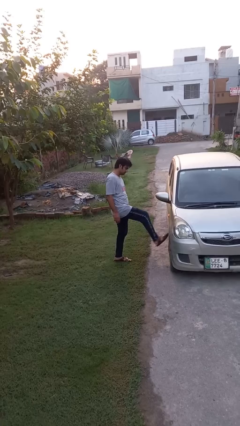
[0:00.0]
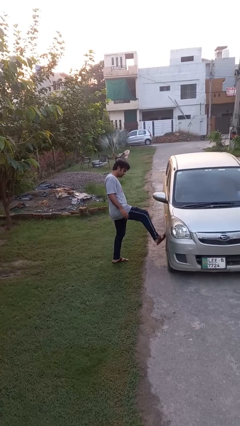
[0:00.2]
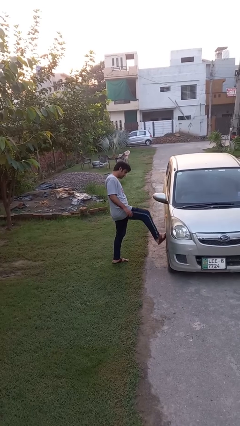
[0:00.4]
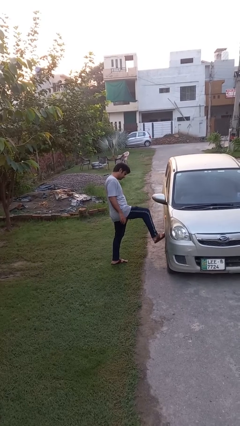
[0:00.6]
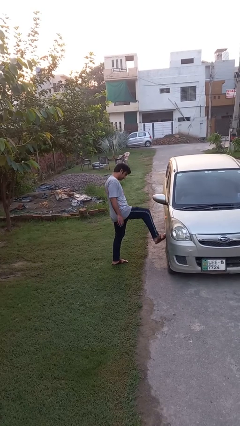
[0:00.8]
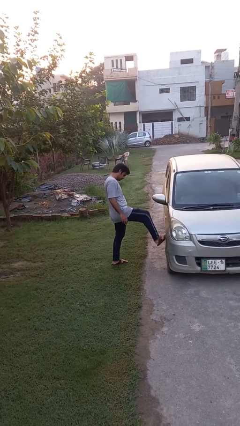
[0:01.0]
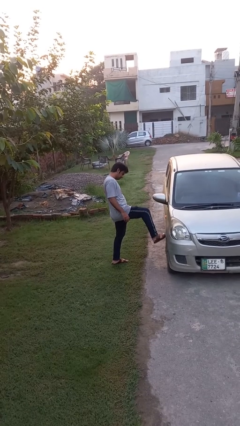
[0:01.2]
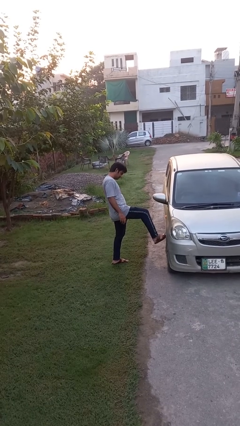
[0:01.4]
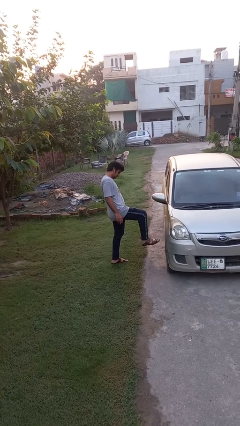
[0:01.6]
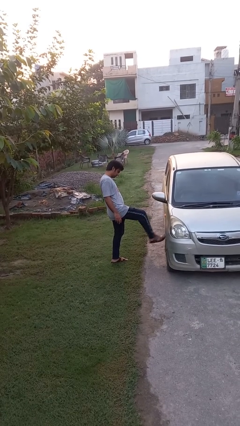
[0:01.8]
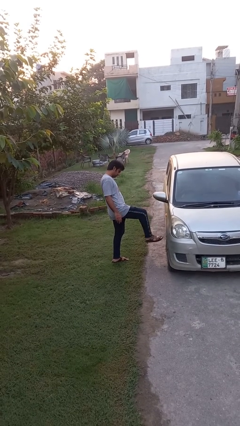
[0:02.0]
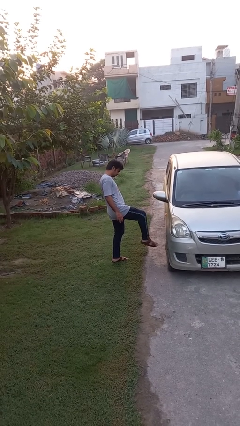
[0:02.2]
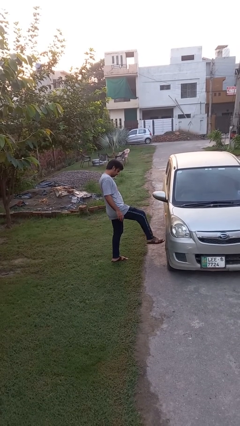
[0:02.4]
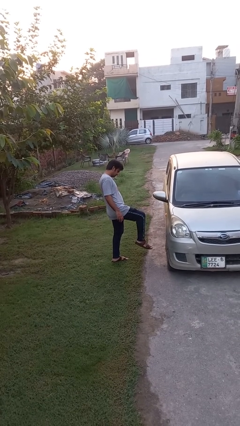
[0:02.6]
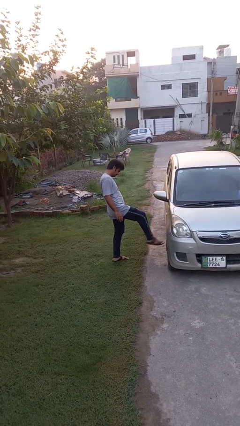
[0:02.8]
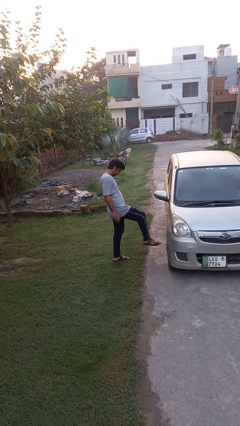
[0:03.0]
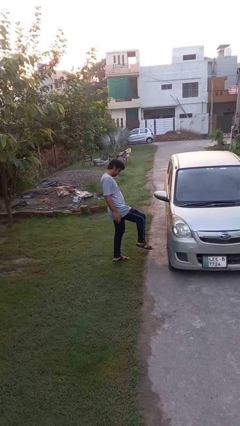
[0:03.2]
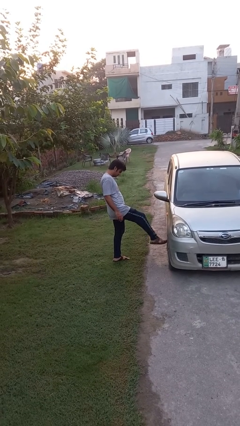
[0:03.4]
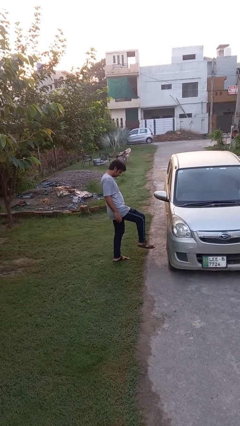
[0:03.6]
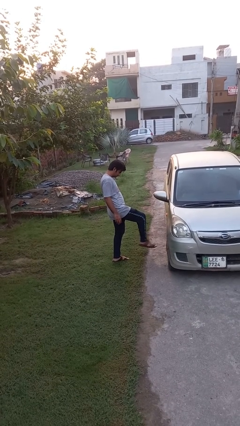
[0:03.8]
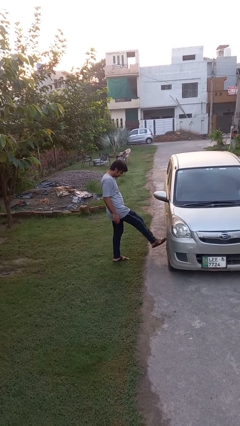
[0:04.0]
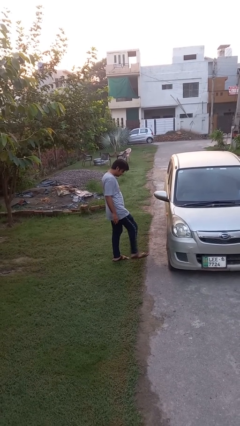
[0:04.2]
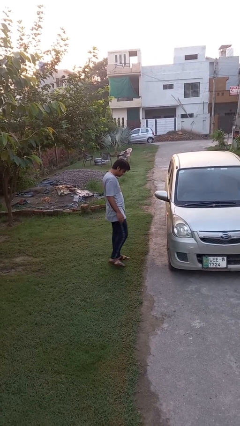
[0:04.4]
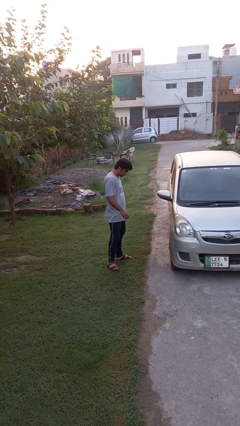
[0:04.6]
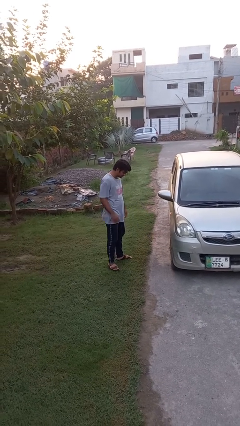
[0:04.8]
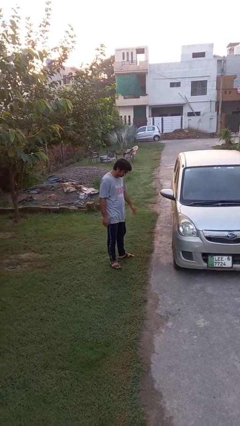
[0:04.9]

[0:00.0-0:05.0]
person kicks car tires

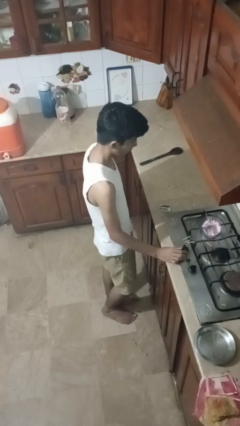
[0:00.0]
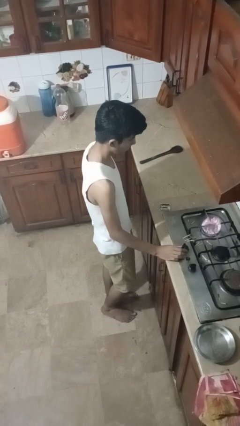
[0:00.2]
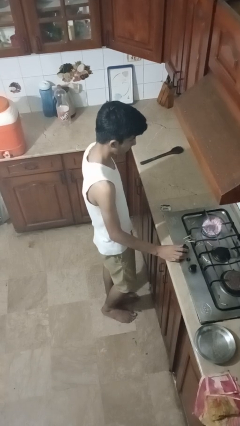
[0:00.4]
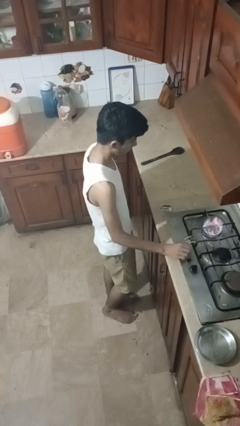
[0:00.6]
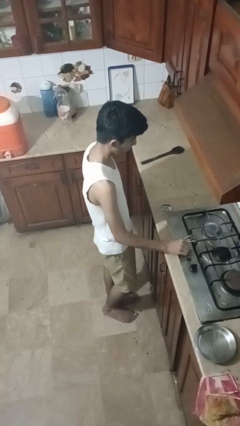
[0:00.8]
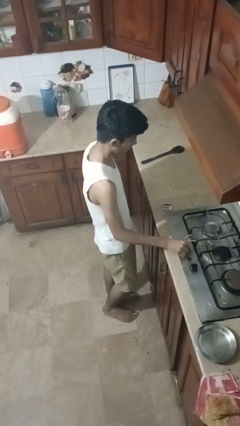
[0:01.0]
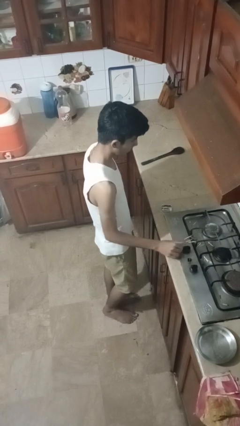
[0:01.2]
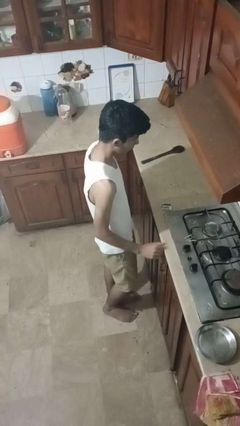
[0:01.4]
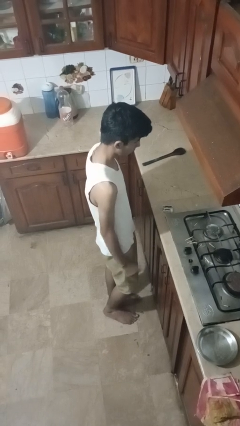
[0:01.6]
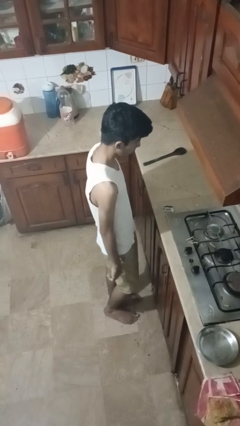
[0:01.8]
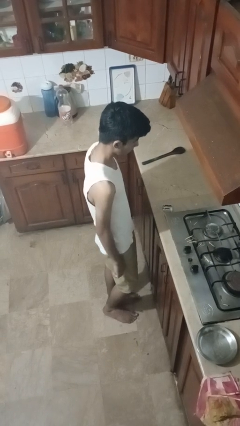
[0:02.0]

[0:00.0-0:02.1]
person turns off stovetop

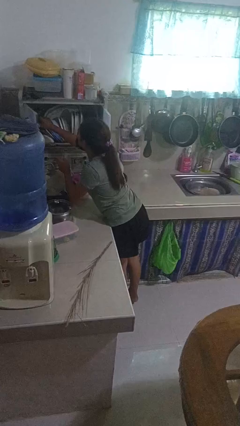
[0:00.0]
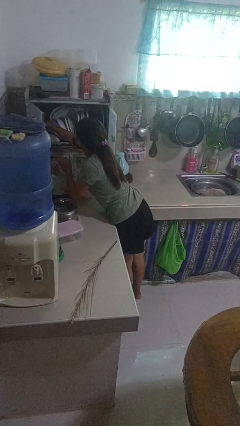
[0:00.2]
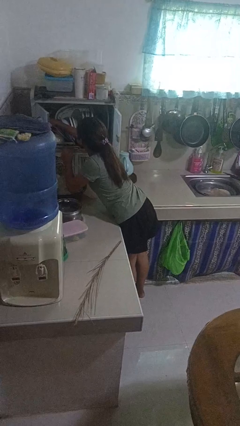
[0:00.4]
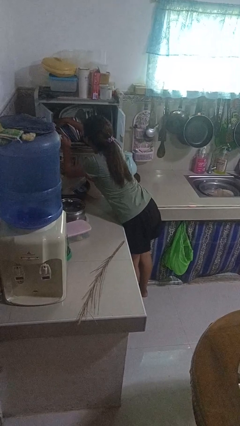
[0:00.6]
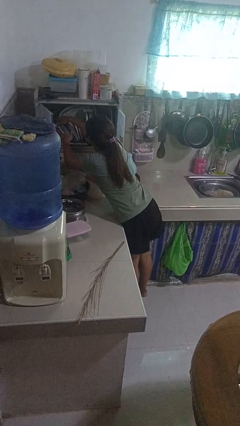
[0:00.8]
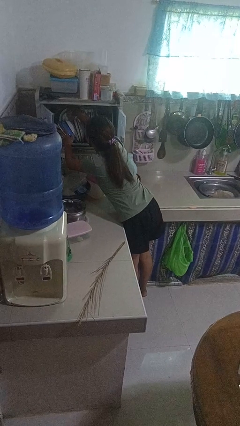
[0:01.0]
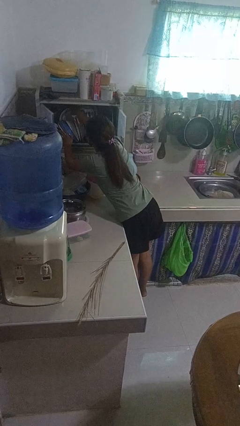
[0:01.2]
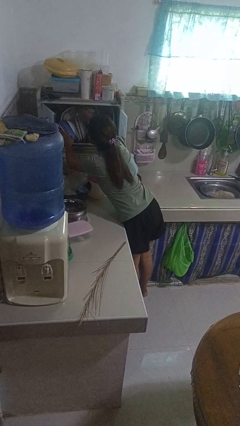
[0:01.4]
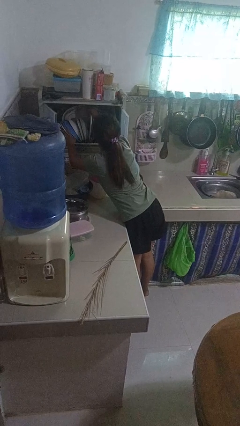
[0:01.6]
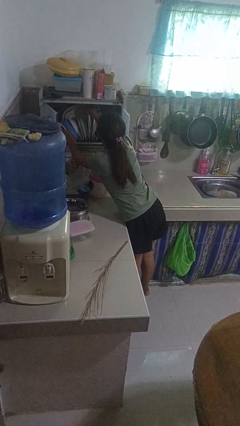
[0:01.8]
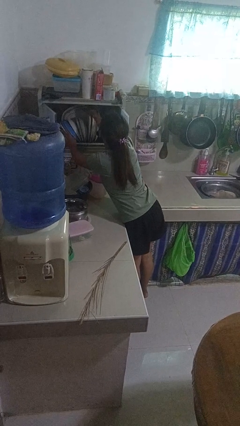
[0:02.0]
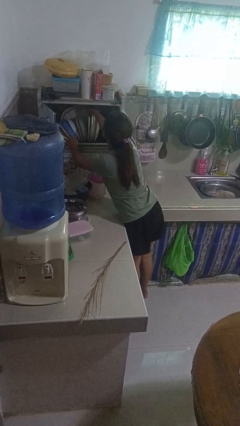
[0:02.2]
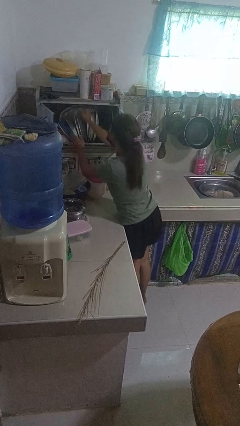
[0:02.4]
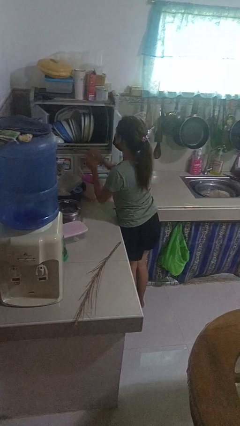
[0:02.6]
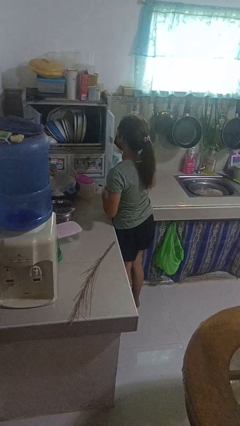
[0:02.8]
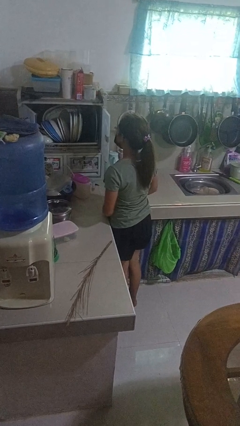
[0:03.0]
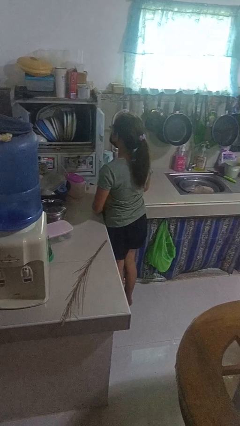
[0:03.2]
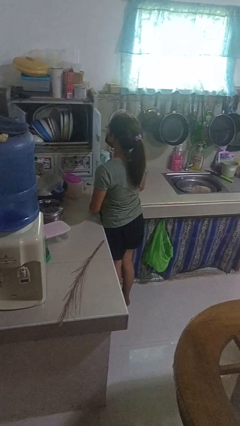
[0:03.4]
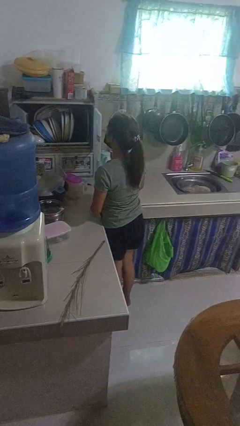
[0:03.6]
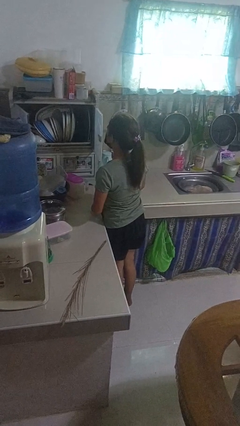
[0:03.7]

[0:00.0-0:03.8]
person searches in kitchen drawer

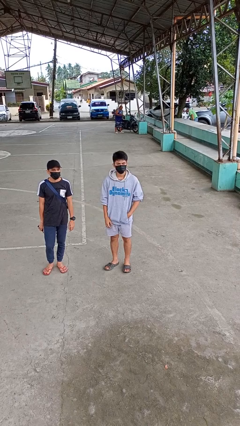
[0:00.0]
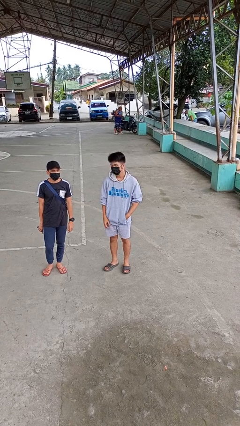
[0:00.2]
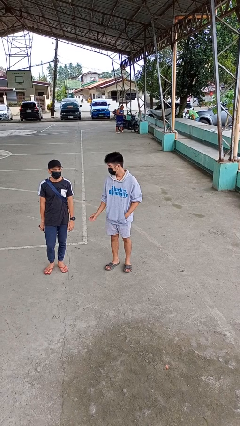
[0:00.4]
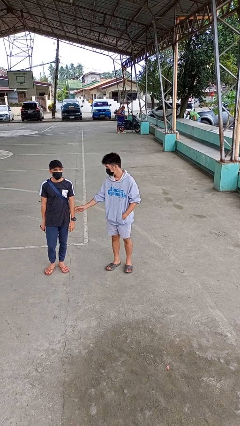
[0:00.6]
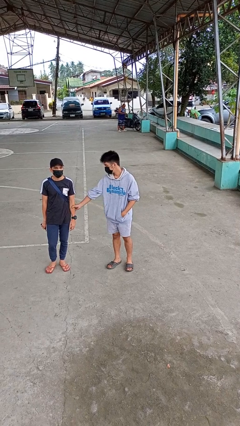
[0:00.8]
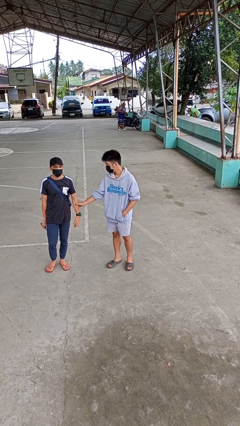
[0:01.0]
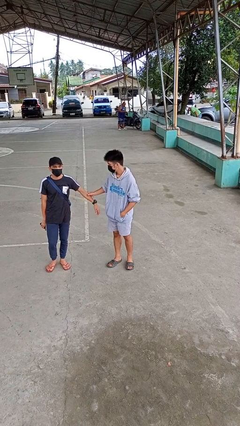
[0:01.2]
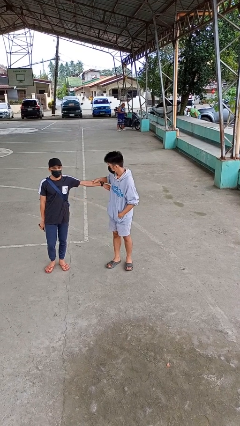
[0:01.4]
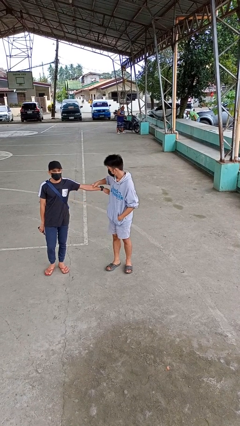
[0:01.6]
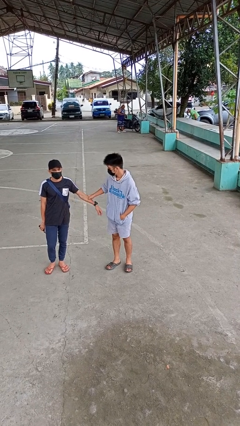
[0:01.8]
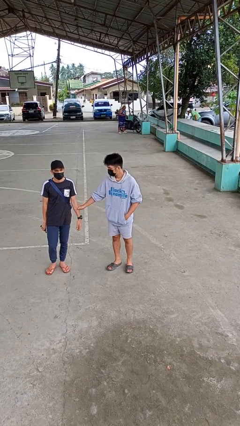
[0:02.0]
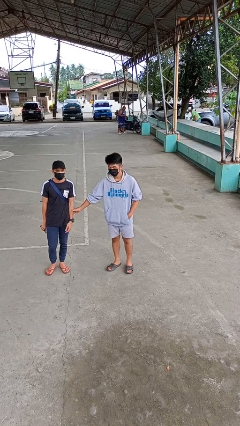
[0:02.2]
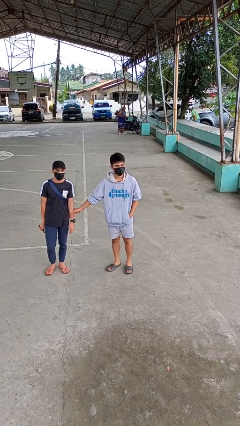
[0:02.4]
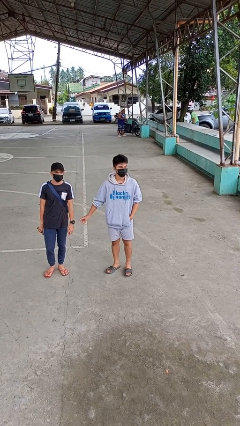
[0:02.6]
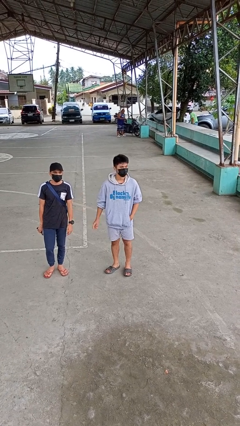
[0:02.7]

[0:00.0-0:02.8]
person grabs person by forearm

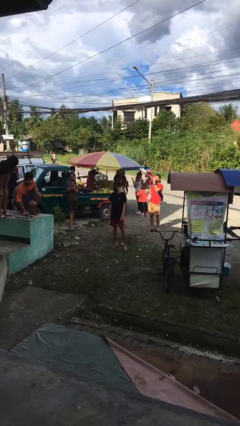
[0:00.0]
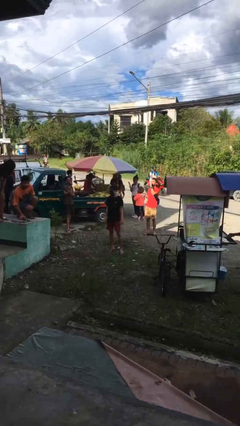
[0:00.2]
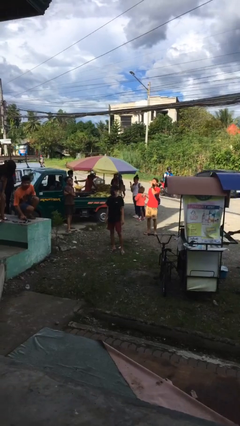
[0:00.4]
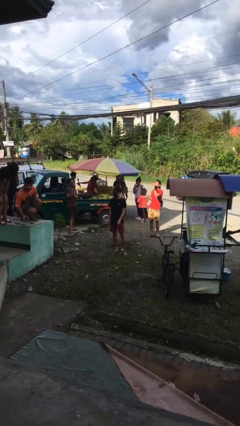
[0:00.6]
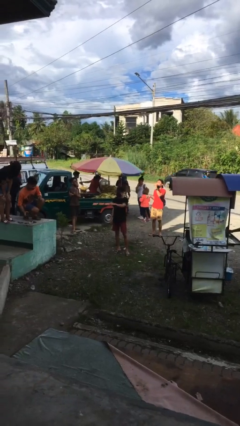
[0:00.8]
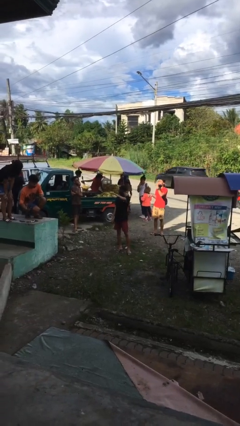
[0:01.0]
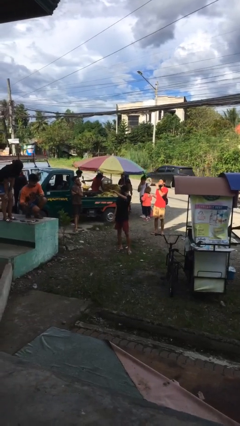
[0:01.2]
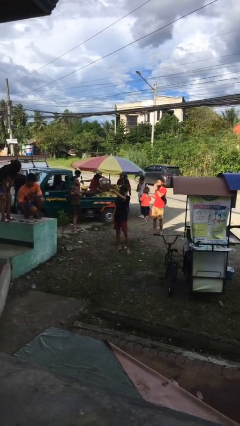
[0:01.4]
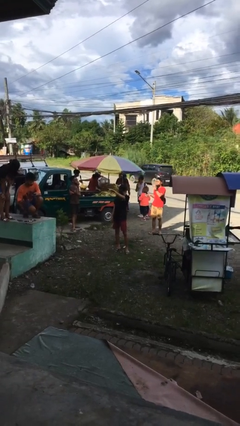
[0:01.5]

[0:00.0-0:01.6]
person points at person

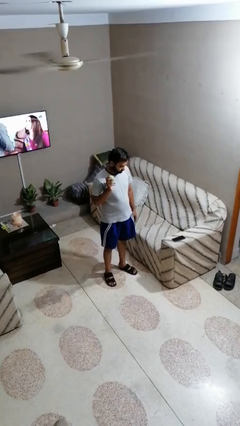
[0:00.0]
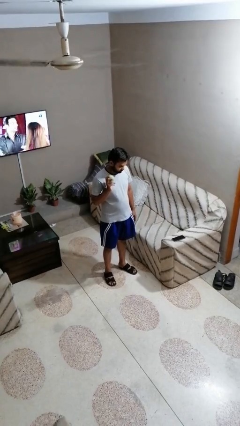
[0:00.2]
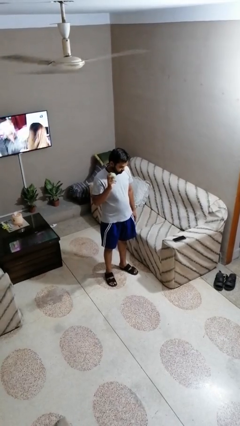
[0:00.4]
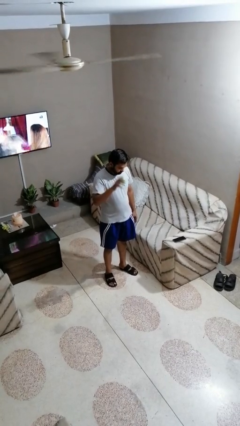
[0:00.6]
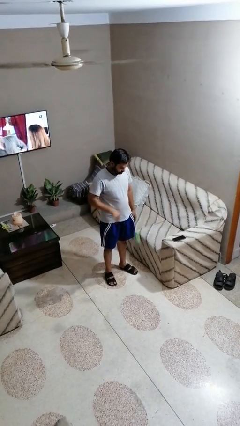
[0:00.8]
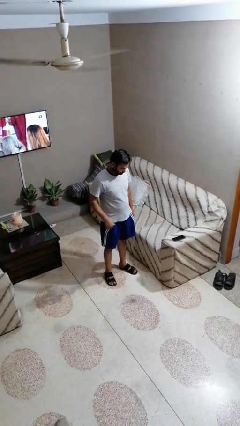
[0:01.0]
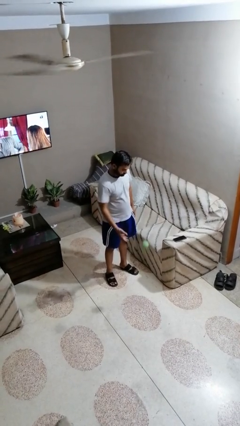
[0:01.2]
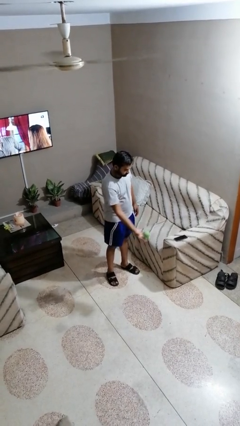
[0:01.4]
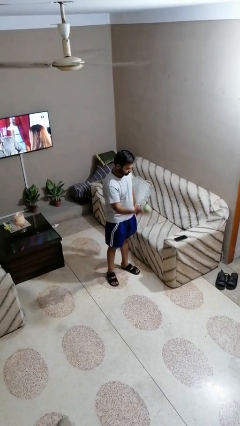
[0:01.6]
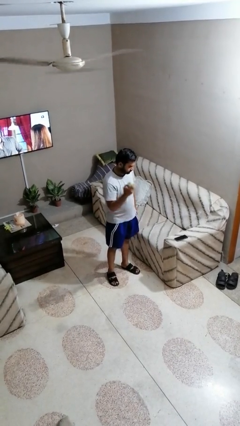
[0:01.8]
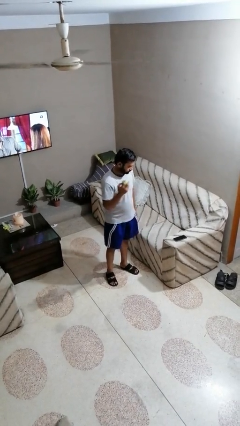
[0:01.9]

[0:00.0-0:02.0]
person bounces ball on floor
